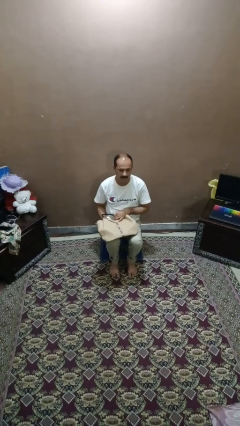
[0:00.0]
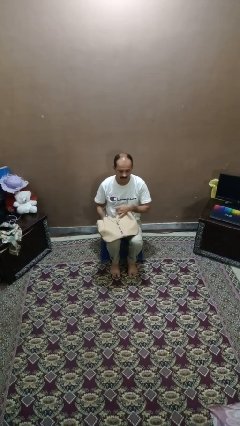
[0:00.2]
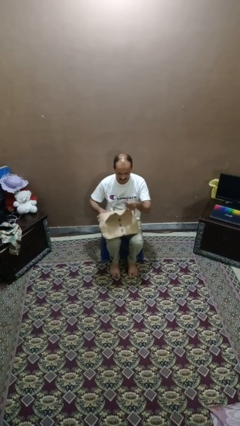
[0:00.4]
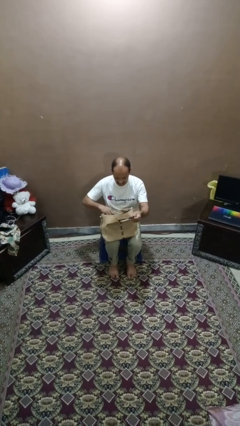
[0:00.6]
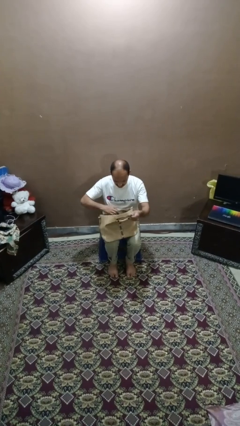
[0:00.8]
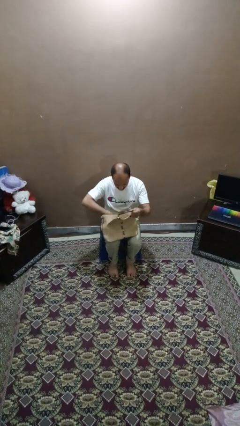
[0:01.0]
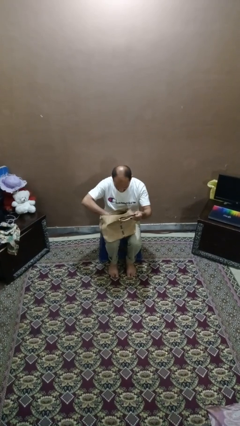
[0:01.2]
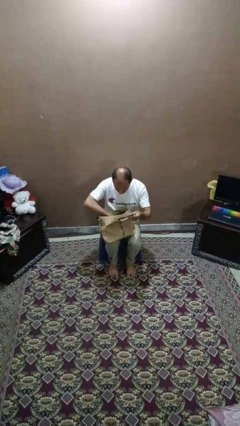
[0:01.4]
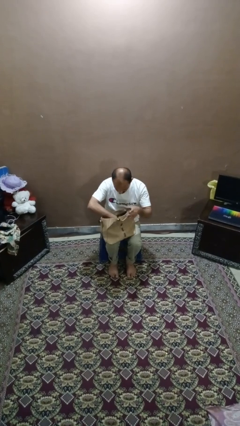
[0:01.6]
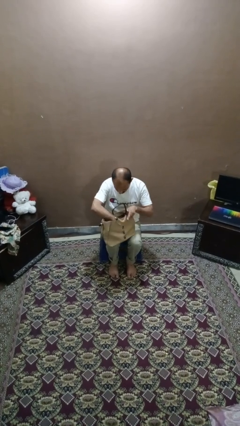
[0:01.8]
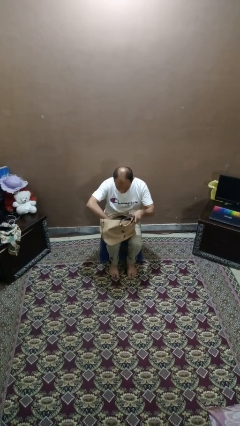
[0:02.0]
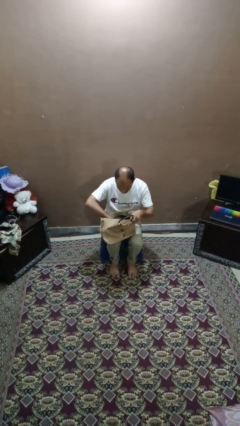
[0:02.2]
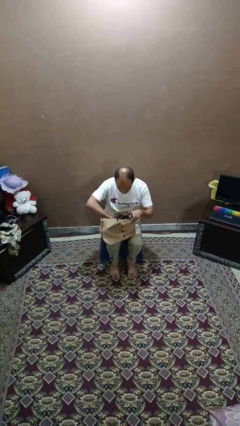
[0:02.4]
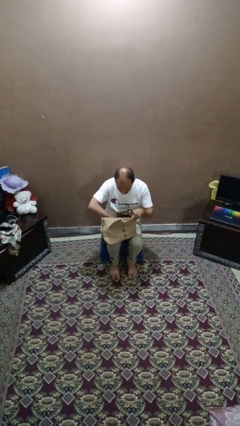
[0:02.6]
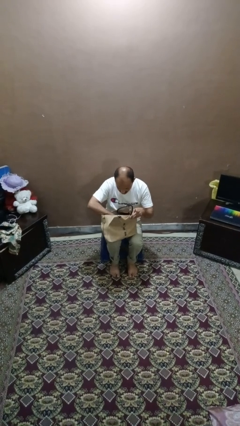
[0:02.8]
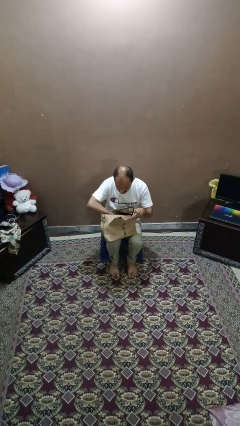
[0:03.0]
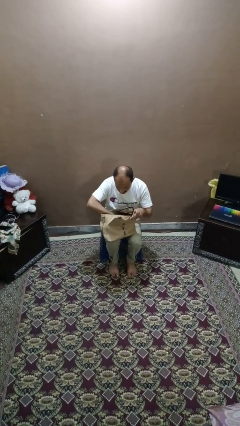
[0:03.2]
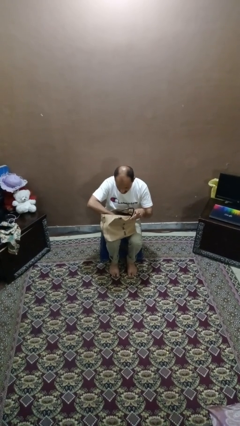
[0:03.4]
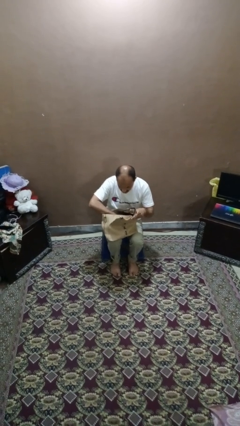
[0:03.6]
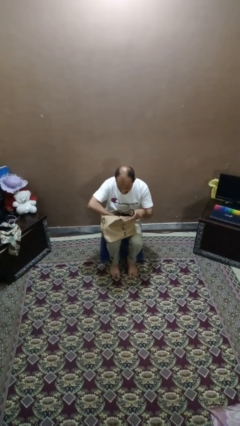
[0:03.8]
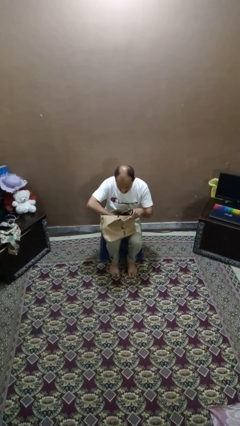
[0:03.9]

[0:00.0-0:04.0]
person searches in purse

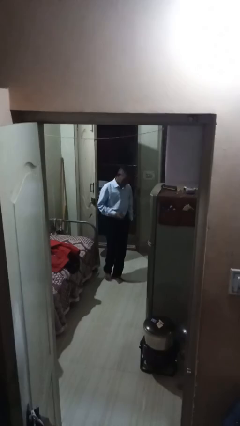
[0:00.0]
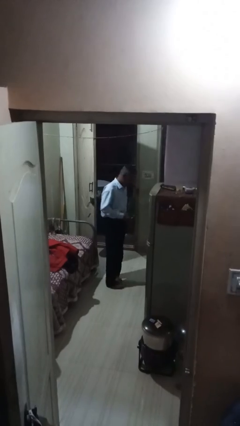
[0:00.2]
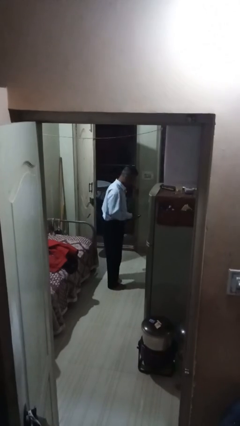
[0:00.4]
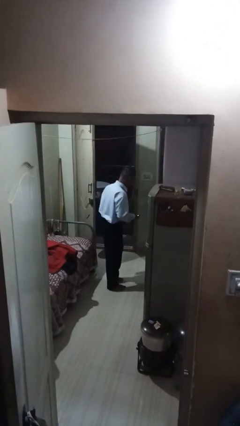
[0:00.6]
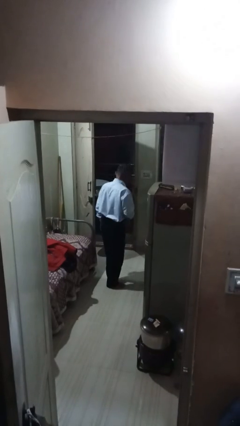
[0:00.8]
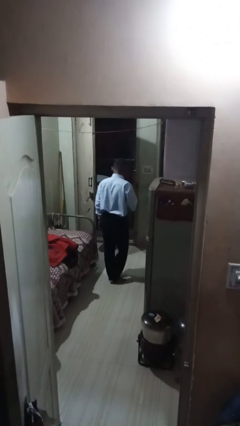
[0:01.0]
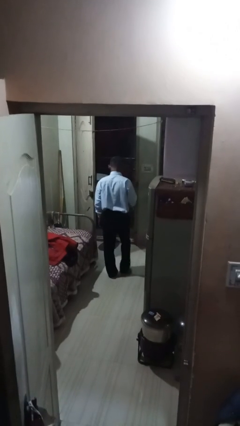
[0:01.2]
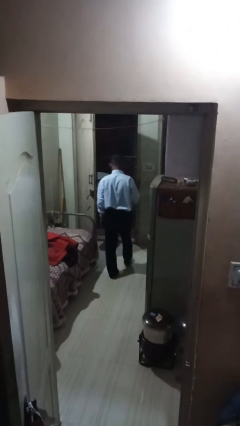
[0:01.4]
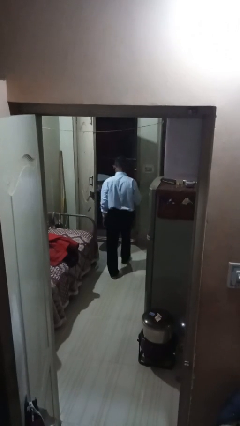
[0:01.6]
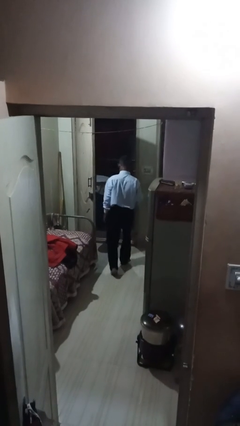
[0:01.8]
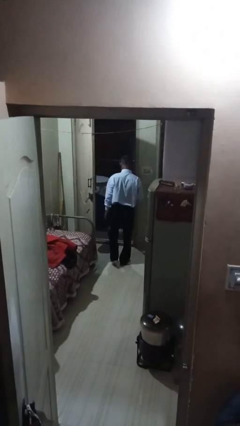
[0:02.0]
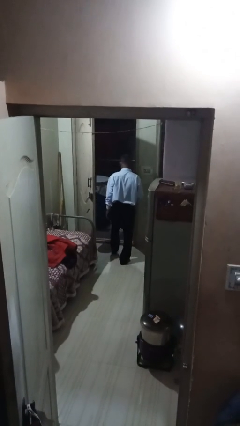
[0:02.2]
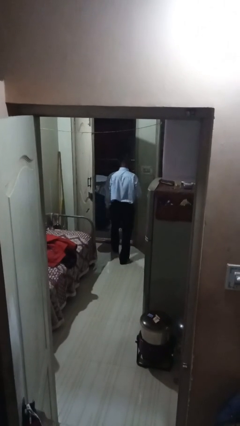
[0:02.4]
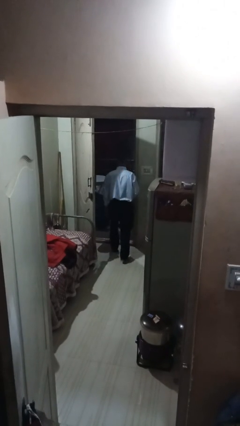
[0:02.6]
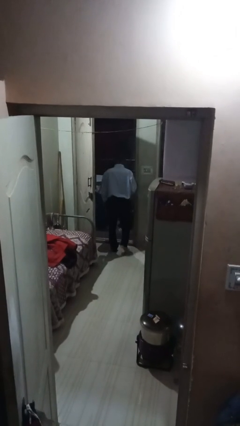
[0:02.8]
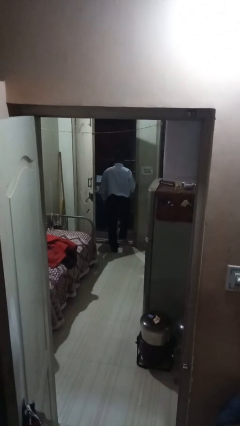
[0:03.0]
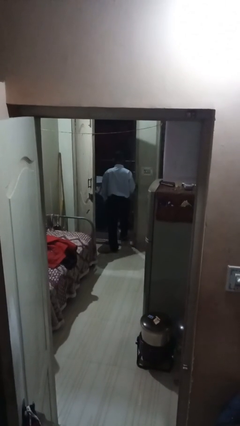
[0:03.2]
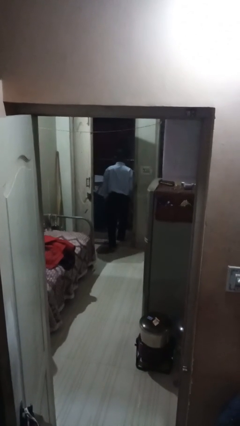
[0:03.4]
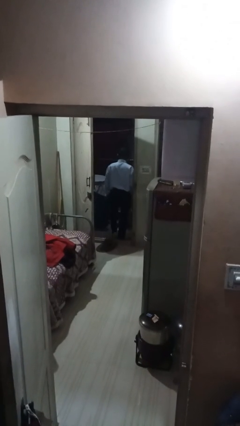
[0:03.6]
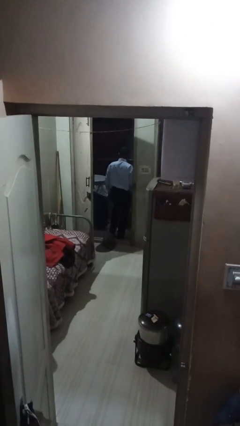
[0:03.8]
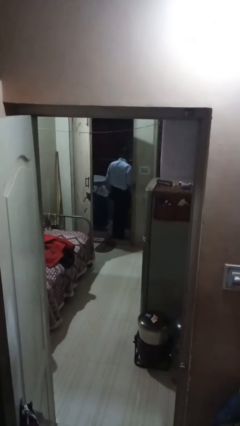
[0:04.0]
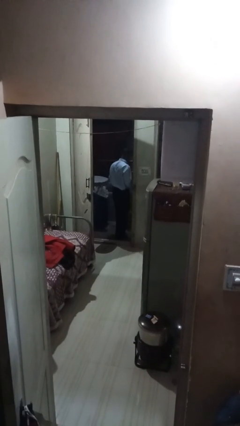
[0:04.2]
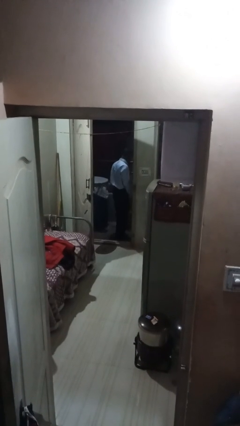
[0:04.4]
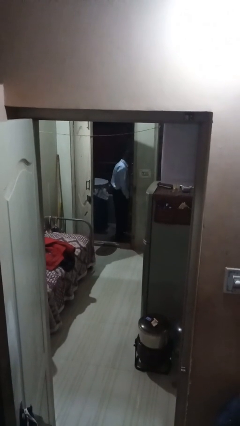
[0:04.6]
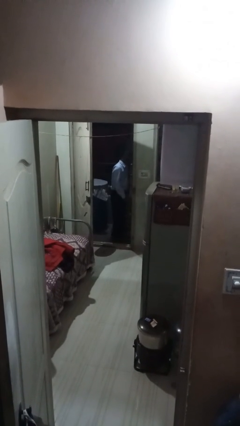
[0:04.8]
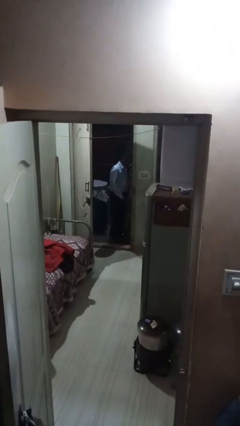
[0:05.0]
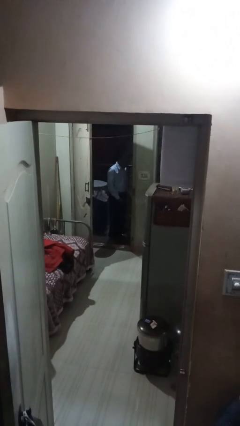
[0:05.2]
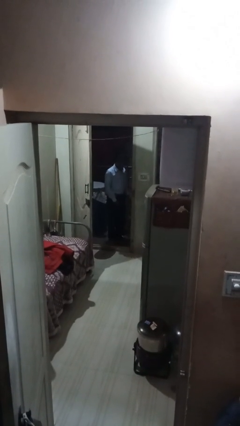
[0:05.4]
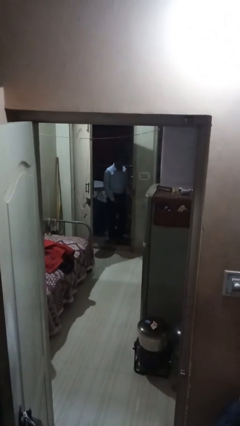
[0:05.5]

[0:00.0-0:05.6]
person exits scene through structure

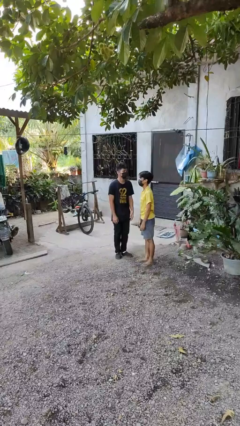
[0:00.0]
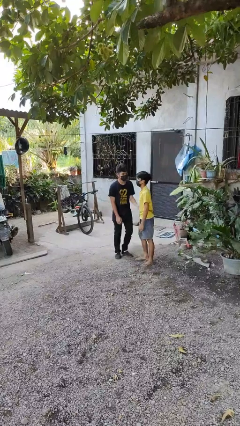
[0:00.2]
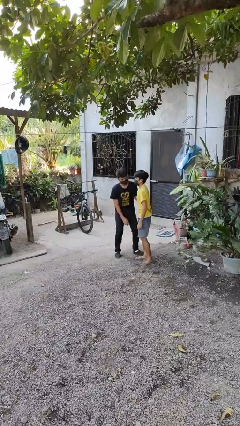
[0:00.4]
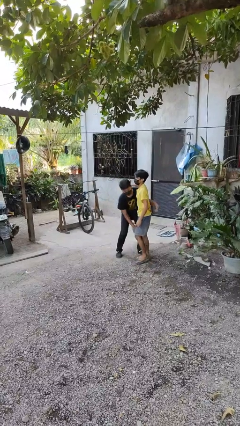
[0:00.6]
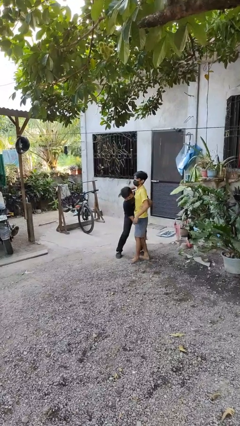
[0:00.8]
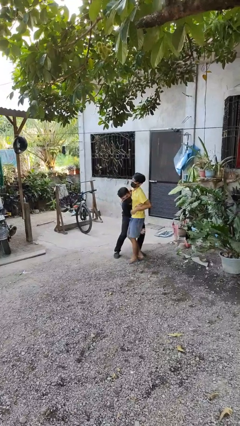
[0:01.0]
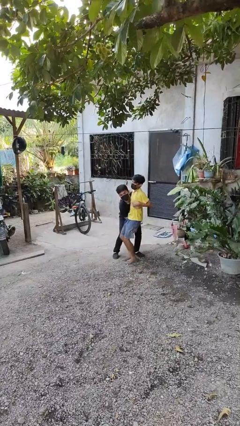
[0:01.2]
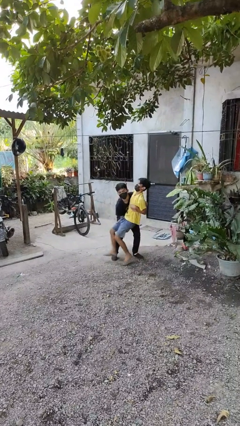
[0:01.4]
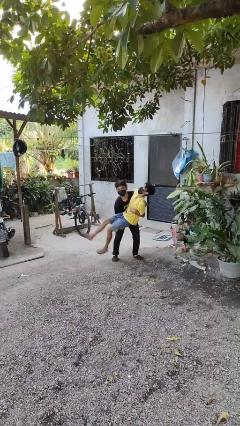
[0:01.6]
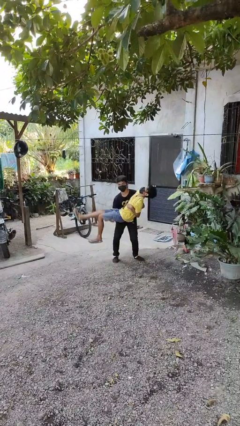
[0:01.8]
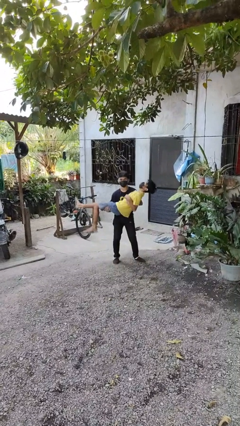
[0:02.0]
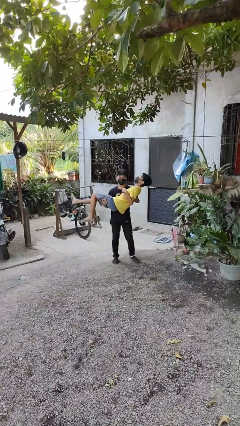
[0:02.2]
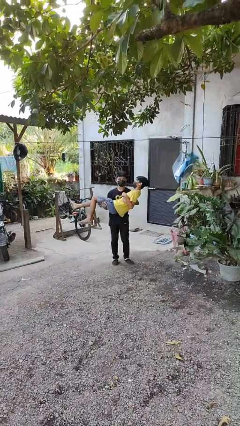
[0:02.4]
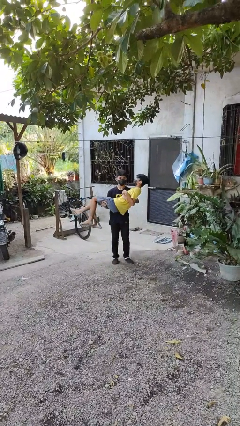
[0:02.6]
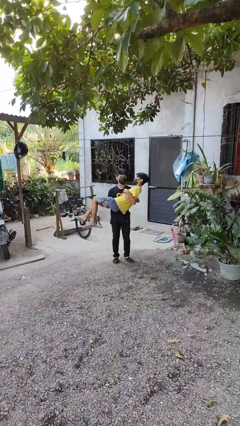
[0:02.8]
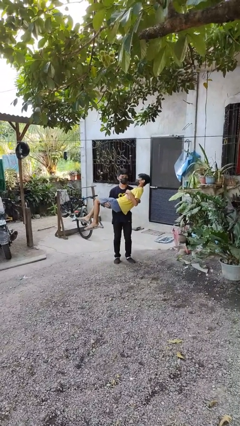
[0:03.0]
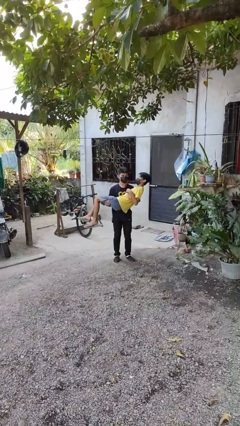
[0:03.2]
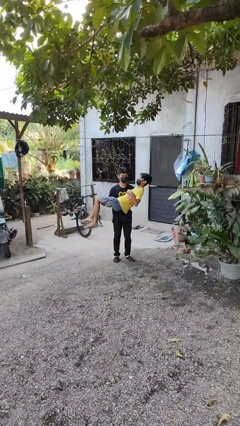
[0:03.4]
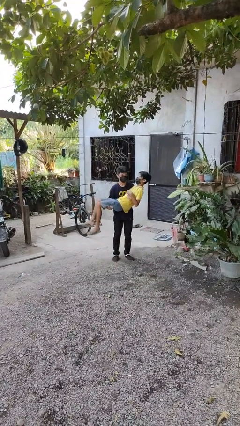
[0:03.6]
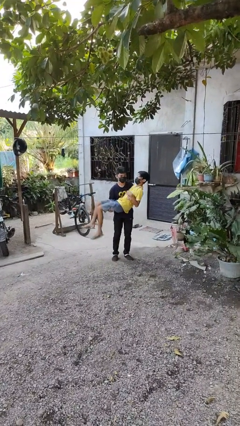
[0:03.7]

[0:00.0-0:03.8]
person picks up person

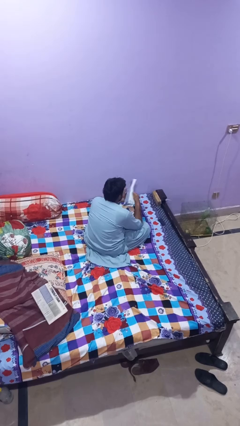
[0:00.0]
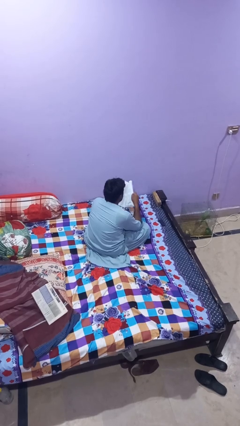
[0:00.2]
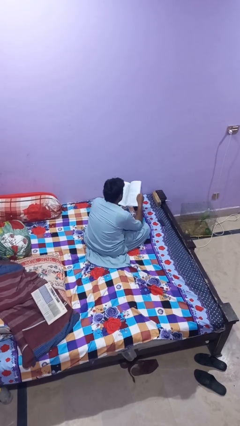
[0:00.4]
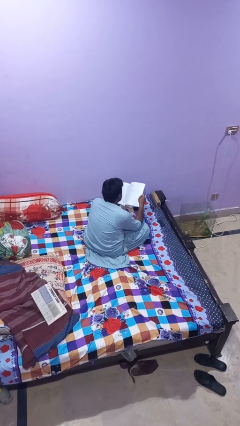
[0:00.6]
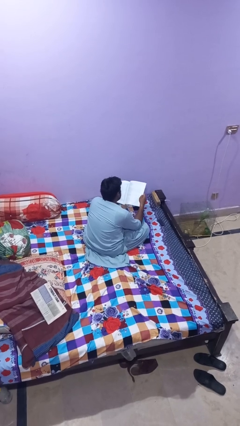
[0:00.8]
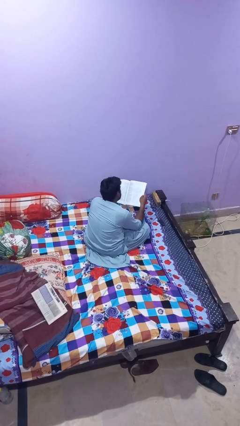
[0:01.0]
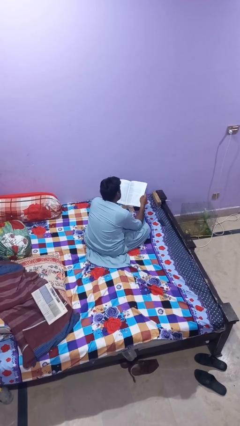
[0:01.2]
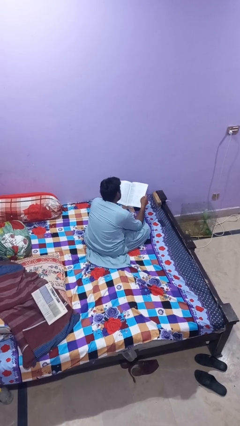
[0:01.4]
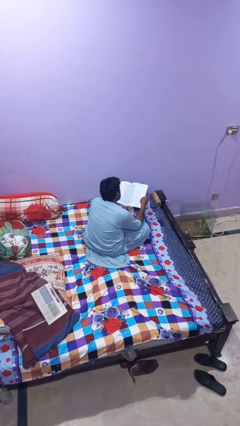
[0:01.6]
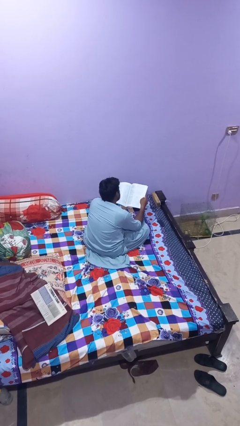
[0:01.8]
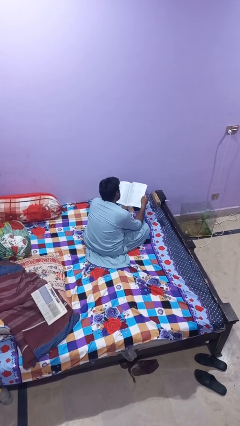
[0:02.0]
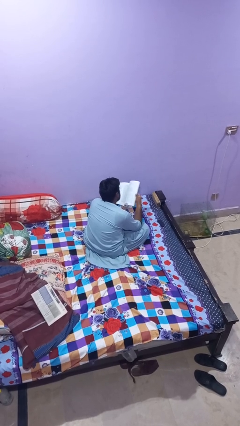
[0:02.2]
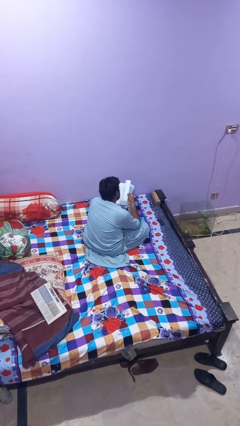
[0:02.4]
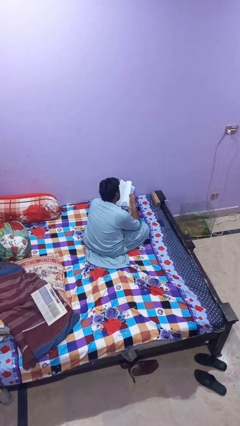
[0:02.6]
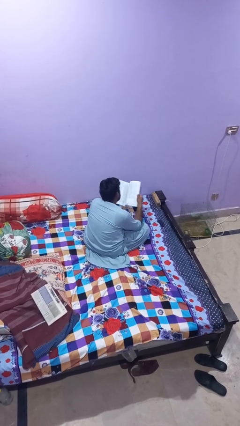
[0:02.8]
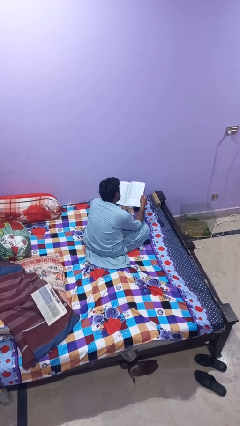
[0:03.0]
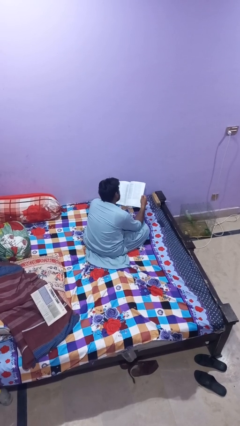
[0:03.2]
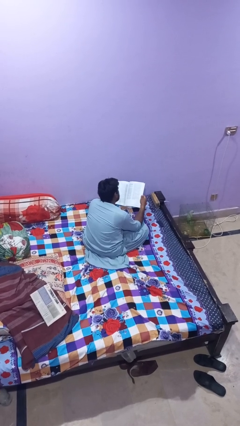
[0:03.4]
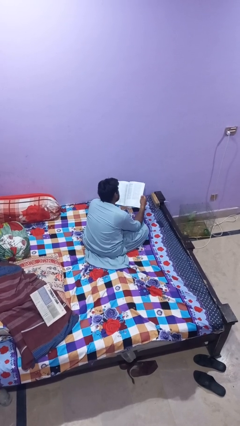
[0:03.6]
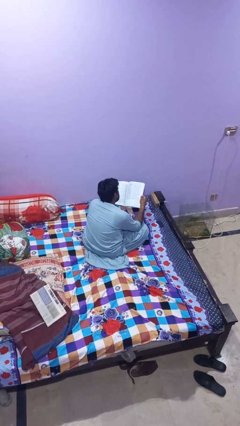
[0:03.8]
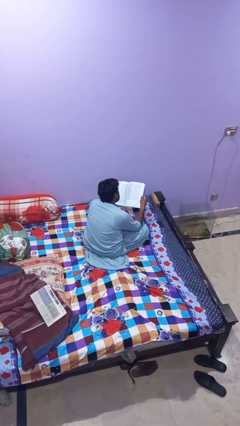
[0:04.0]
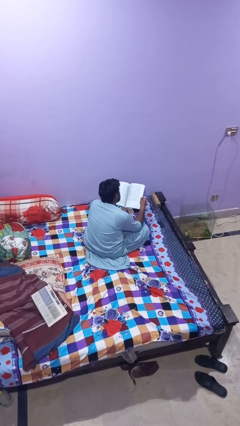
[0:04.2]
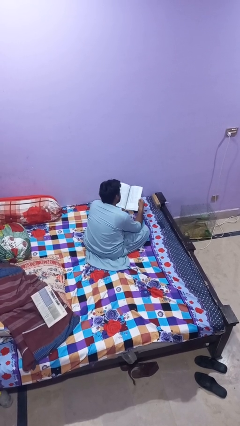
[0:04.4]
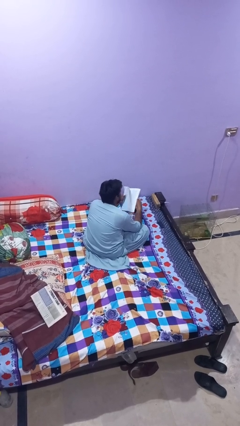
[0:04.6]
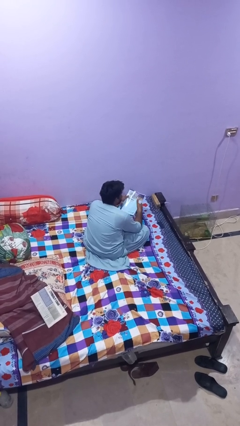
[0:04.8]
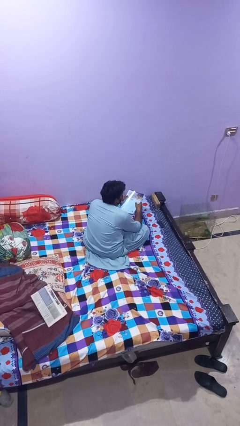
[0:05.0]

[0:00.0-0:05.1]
person reads magazine
